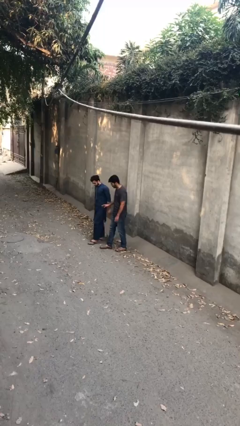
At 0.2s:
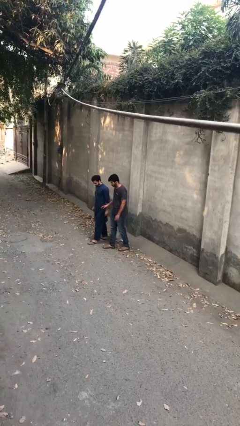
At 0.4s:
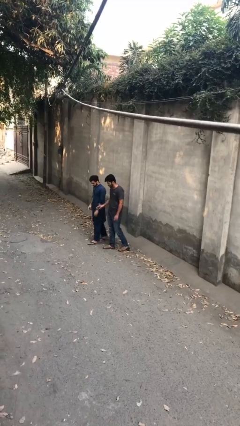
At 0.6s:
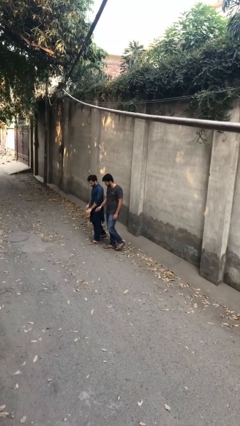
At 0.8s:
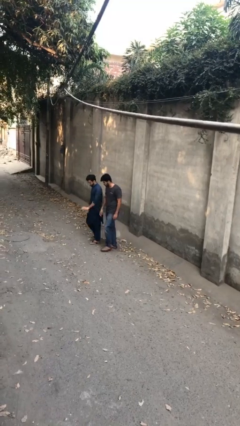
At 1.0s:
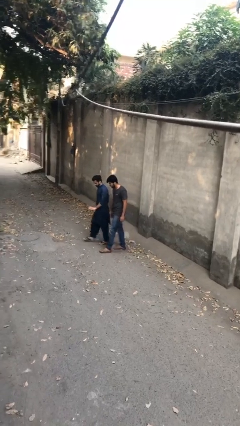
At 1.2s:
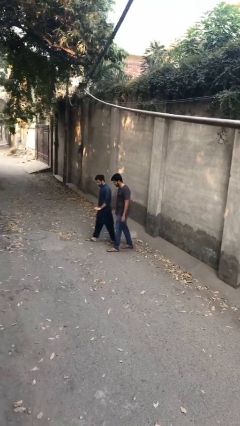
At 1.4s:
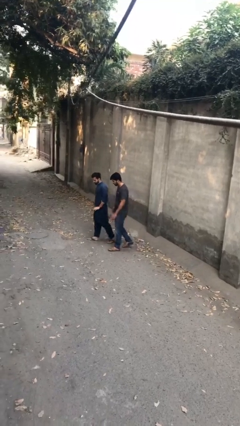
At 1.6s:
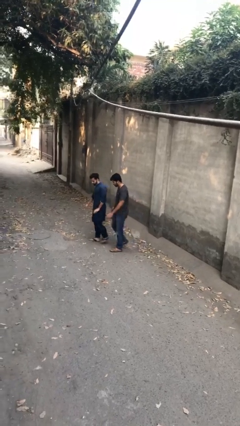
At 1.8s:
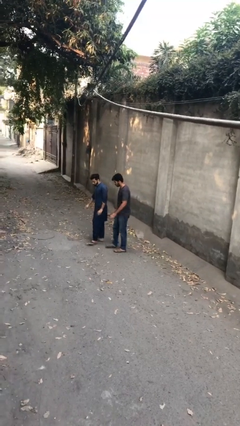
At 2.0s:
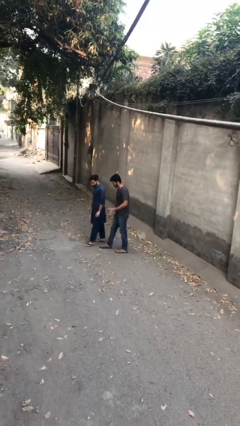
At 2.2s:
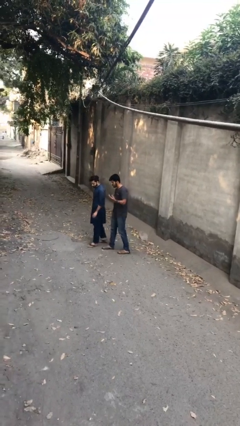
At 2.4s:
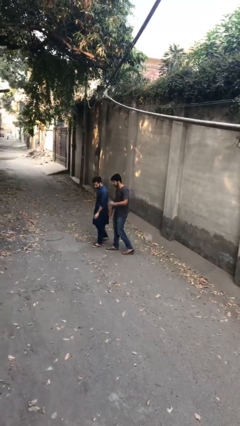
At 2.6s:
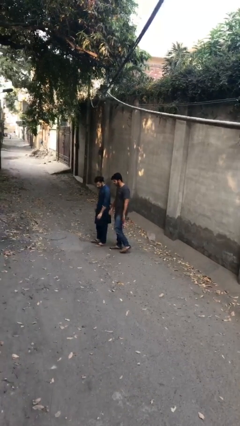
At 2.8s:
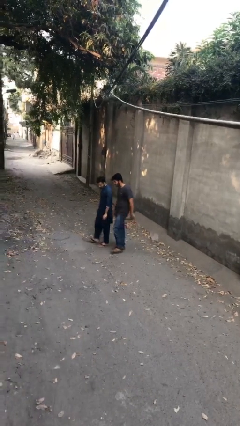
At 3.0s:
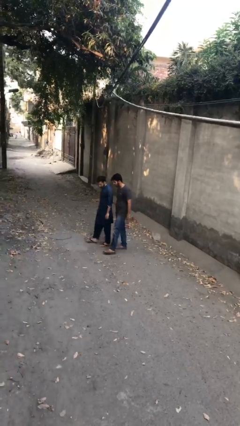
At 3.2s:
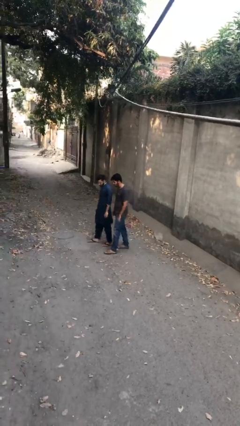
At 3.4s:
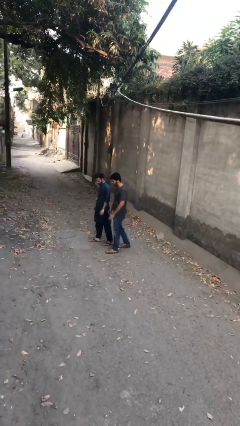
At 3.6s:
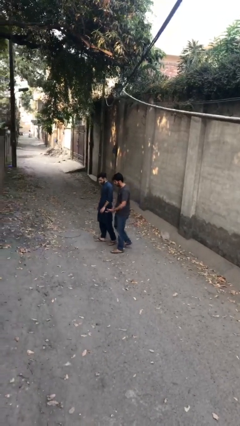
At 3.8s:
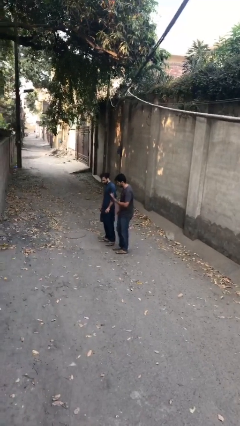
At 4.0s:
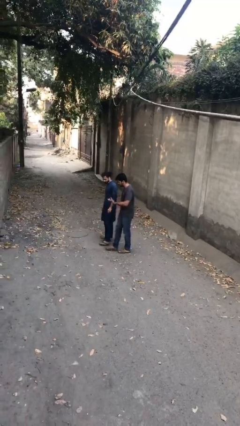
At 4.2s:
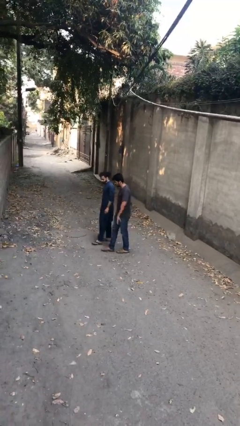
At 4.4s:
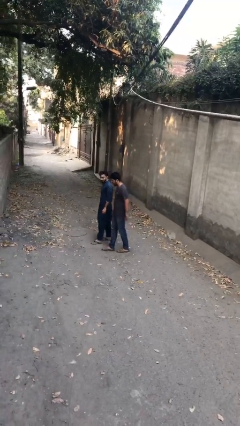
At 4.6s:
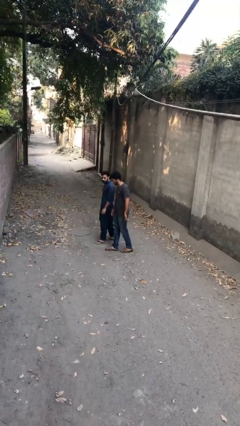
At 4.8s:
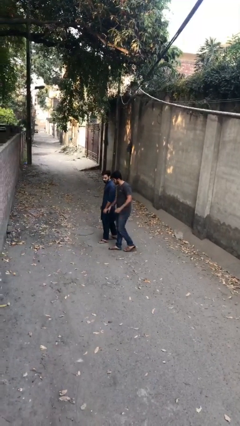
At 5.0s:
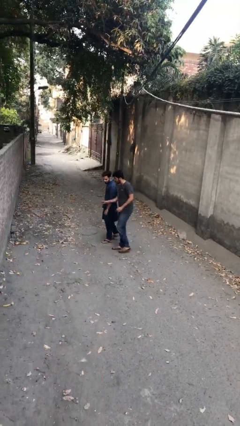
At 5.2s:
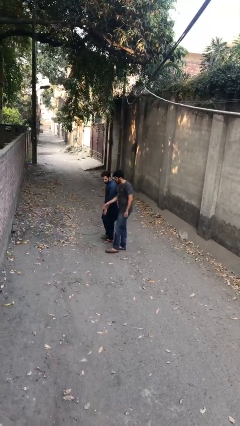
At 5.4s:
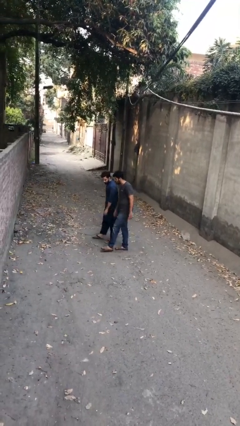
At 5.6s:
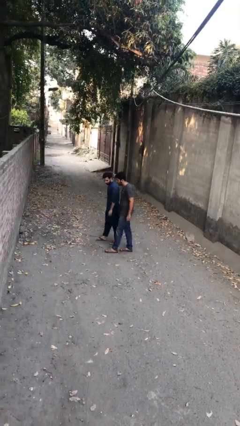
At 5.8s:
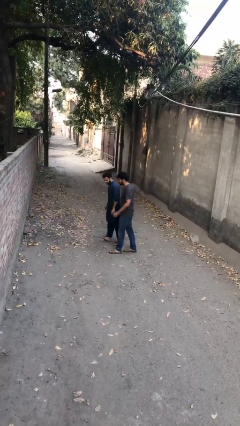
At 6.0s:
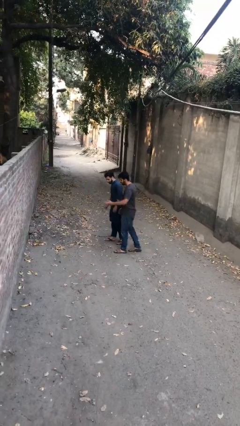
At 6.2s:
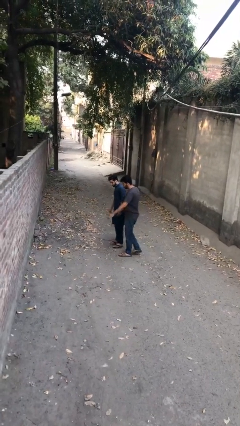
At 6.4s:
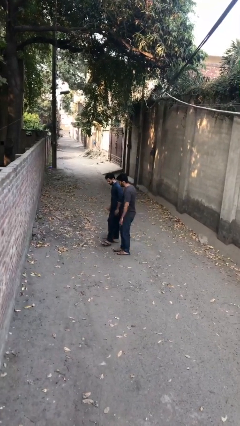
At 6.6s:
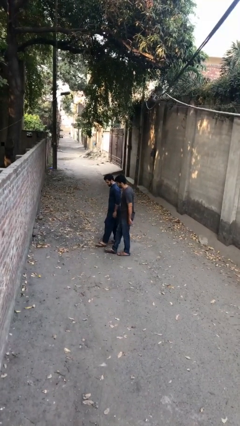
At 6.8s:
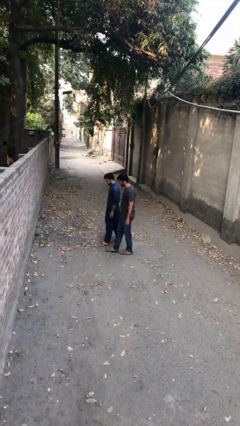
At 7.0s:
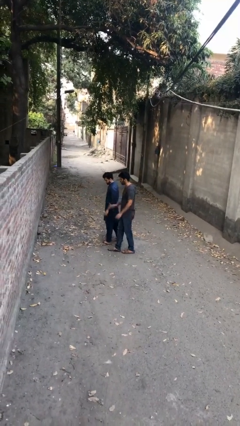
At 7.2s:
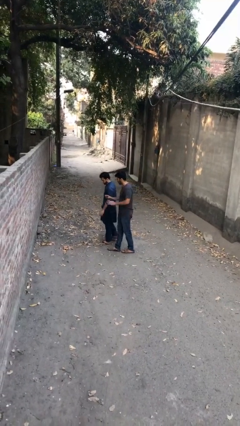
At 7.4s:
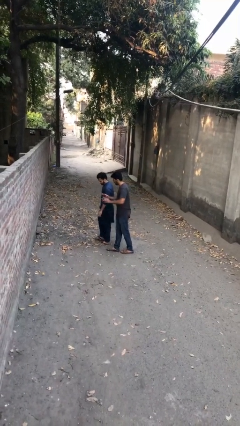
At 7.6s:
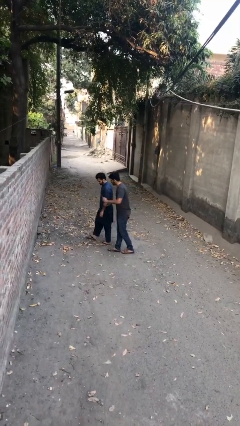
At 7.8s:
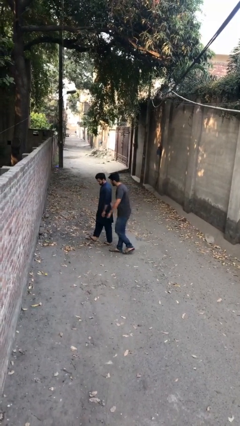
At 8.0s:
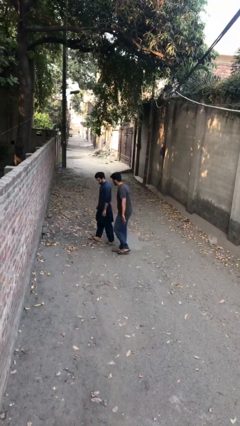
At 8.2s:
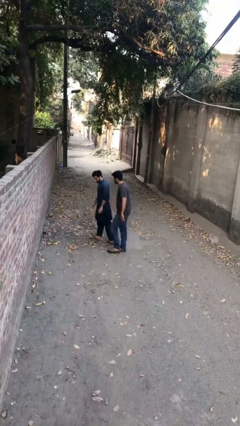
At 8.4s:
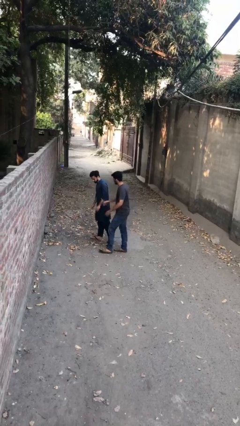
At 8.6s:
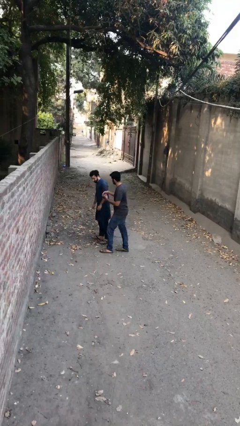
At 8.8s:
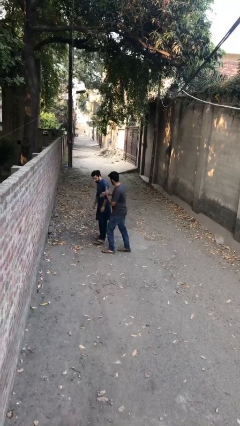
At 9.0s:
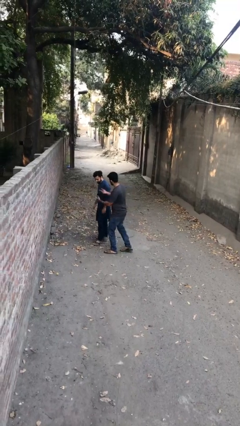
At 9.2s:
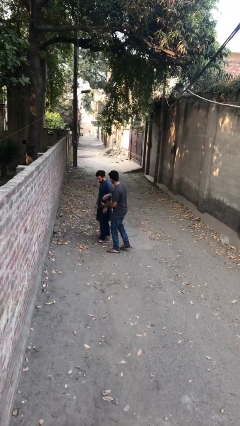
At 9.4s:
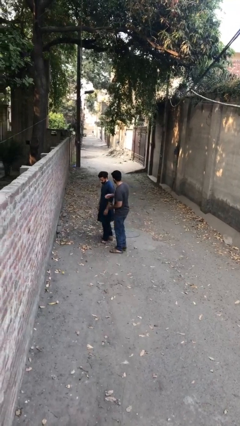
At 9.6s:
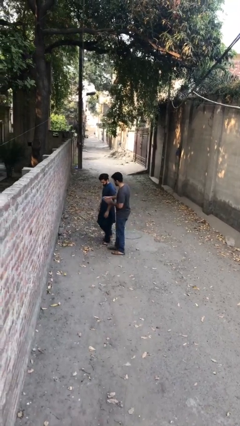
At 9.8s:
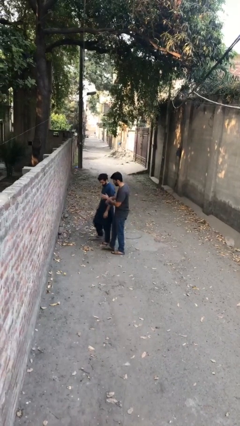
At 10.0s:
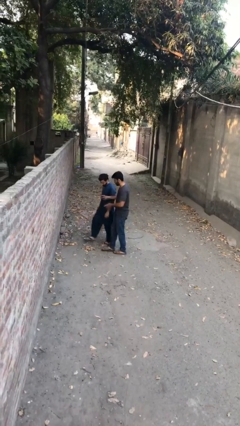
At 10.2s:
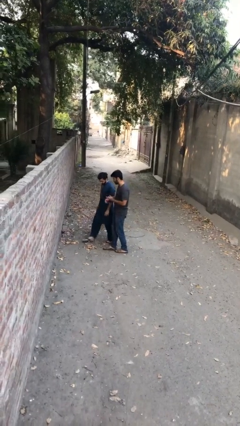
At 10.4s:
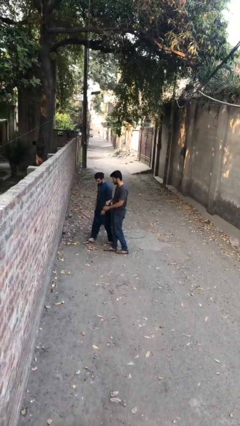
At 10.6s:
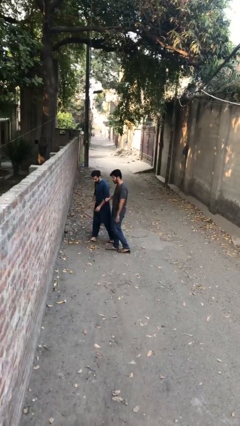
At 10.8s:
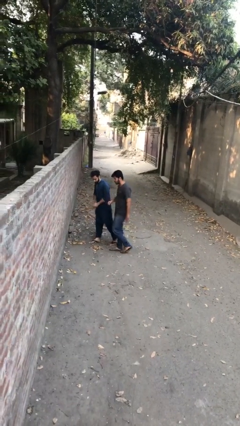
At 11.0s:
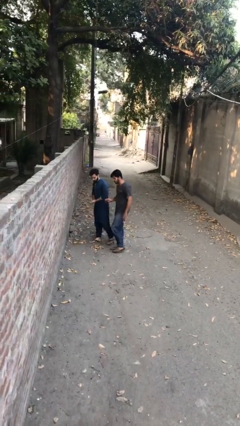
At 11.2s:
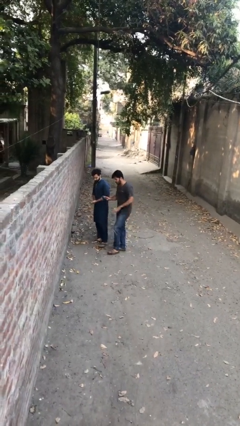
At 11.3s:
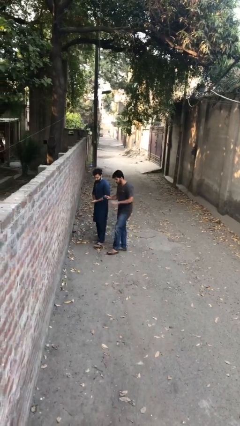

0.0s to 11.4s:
person talks to person

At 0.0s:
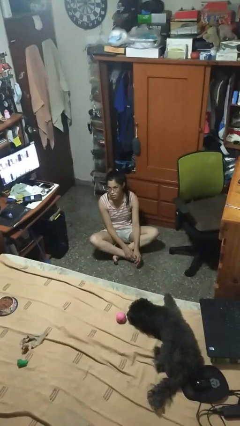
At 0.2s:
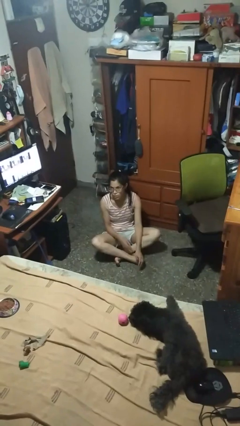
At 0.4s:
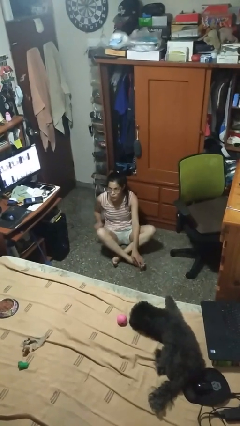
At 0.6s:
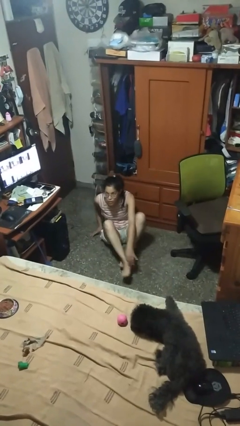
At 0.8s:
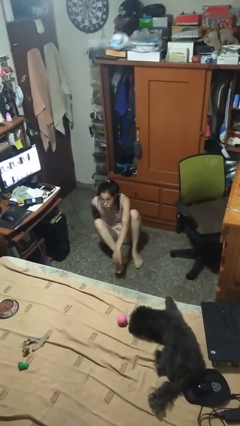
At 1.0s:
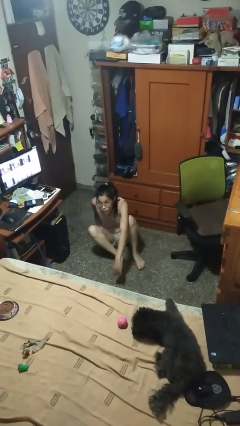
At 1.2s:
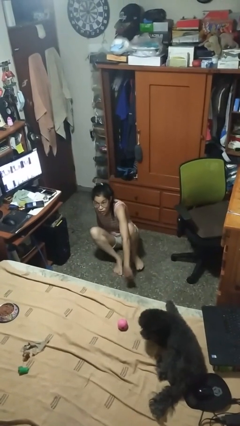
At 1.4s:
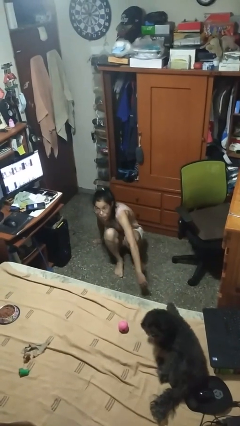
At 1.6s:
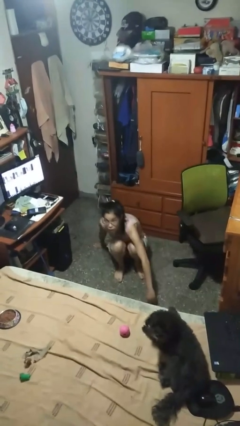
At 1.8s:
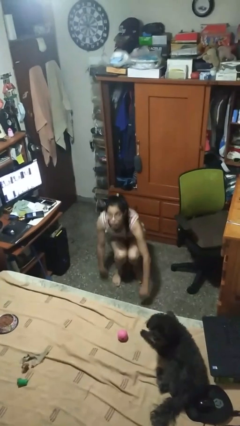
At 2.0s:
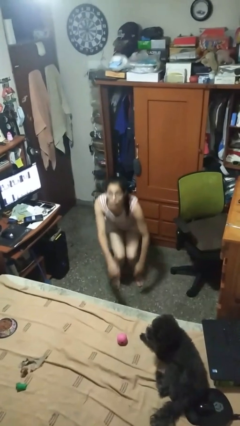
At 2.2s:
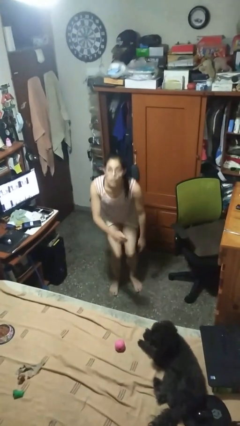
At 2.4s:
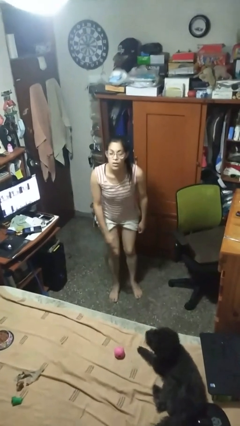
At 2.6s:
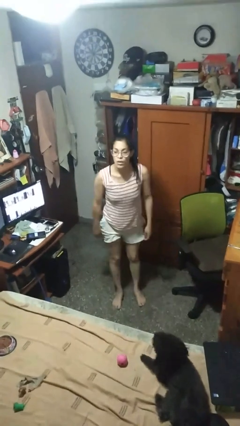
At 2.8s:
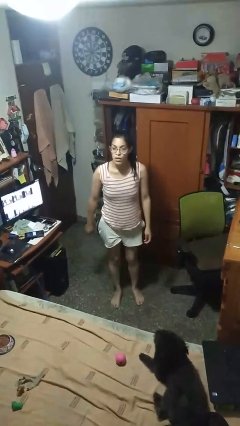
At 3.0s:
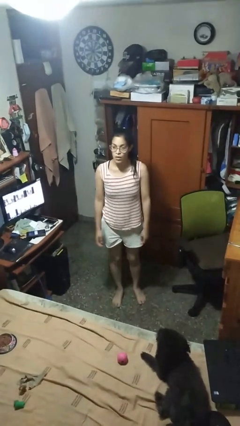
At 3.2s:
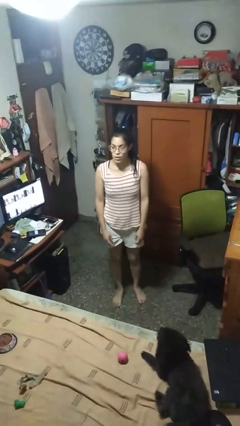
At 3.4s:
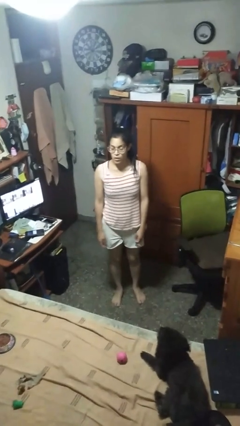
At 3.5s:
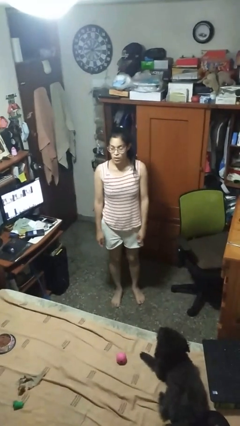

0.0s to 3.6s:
person stands up from floor

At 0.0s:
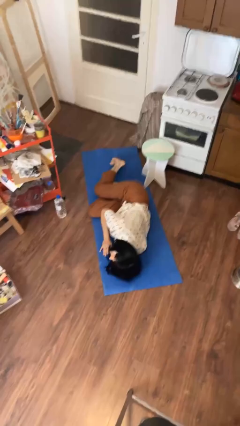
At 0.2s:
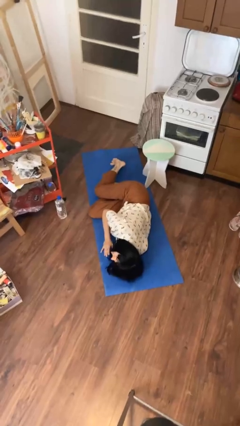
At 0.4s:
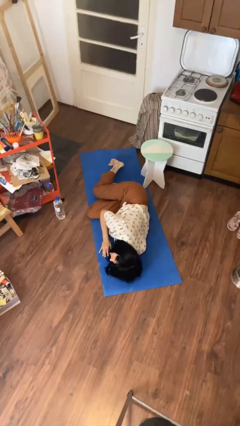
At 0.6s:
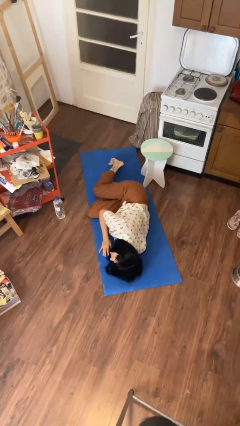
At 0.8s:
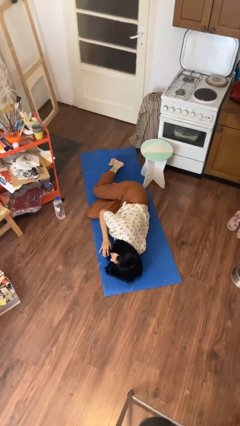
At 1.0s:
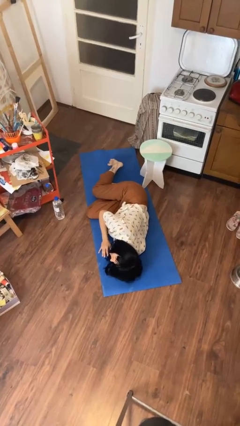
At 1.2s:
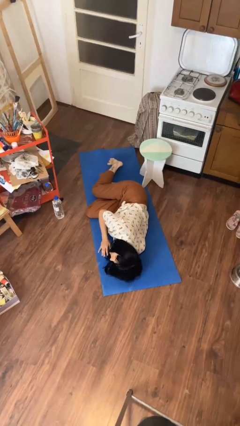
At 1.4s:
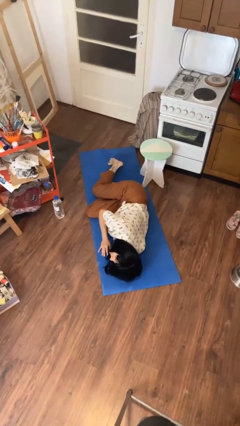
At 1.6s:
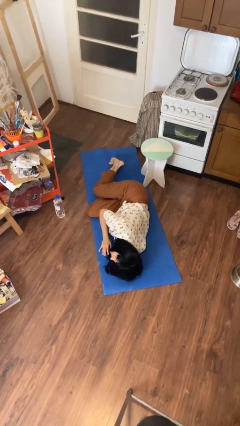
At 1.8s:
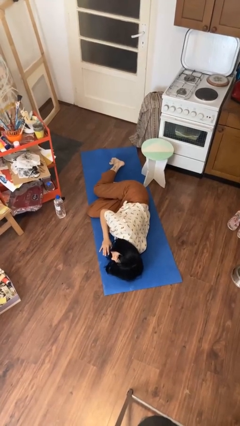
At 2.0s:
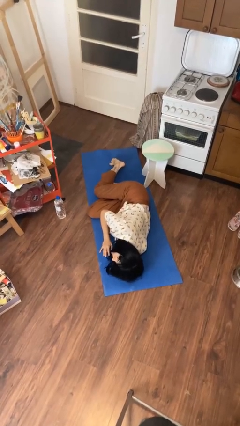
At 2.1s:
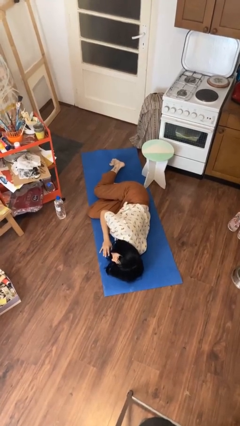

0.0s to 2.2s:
person lies down on floor

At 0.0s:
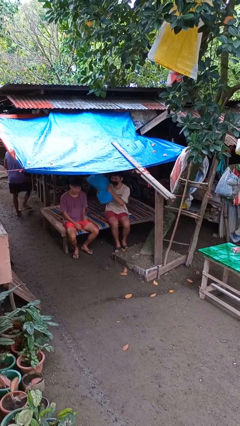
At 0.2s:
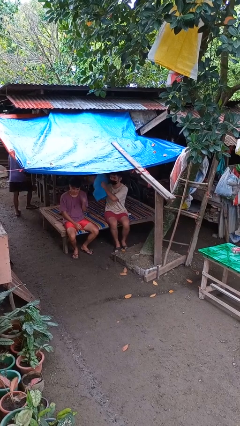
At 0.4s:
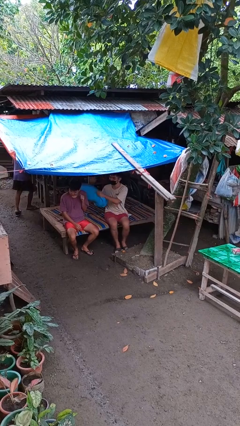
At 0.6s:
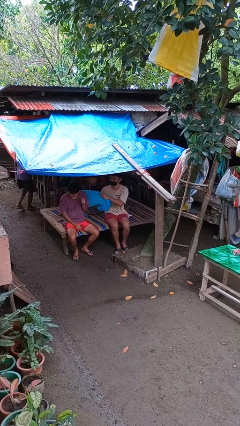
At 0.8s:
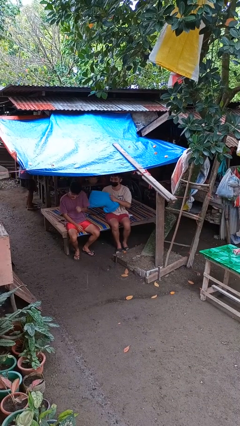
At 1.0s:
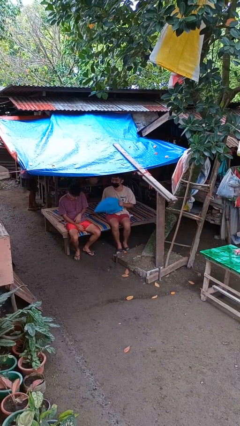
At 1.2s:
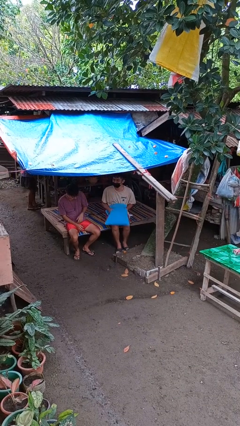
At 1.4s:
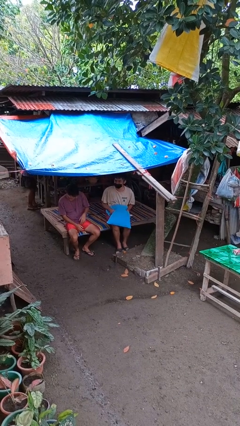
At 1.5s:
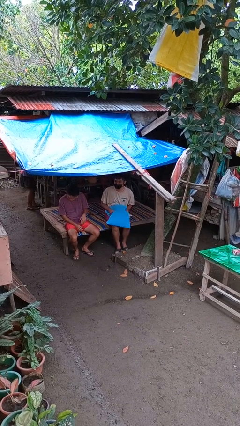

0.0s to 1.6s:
person hits person with pillow
